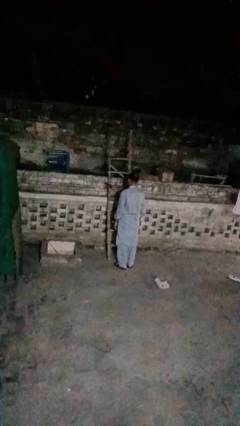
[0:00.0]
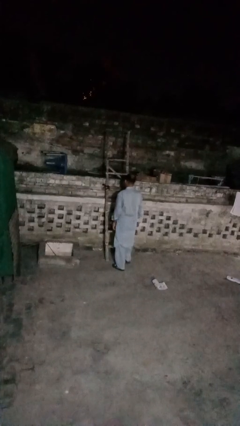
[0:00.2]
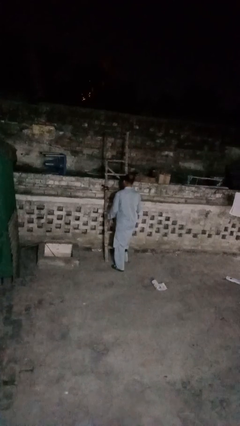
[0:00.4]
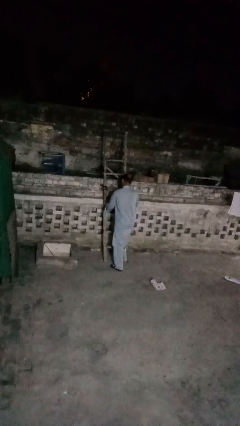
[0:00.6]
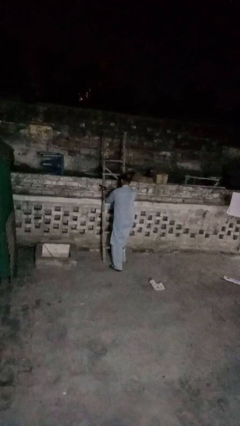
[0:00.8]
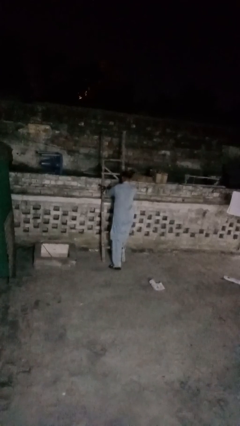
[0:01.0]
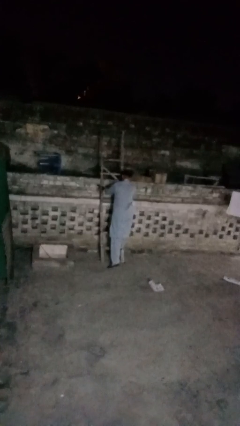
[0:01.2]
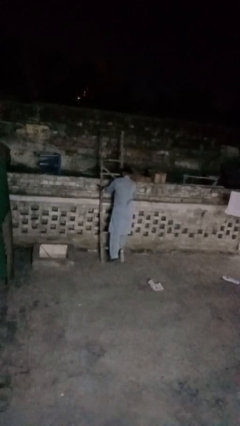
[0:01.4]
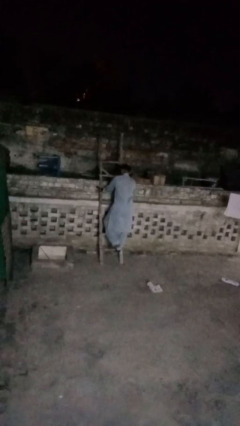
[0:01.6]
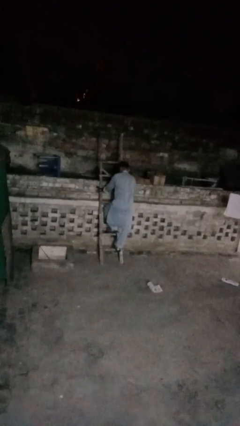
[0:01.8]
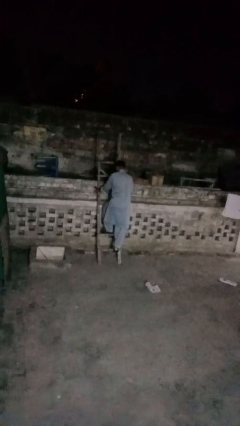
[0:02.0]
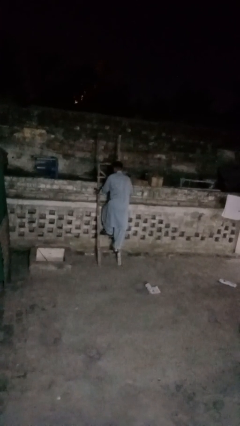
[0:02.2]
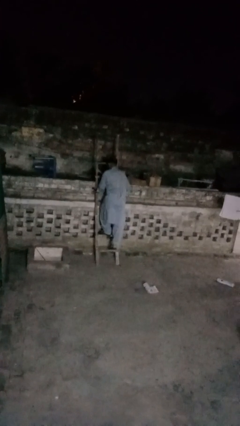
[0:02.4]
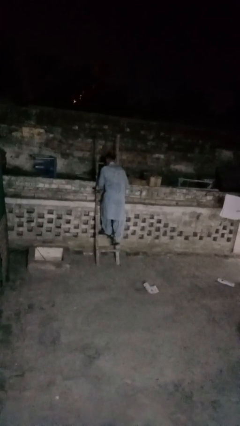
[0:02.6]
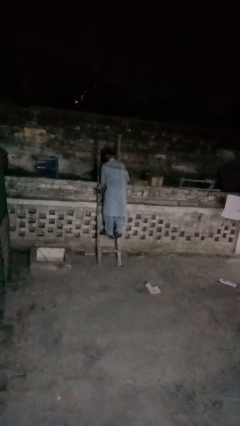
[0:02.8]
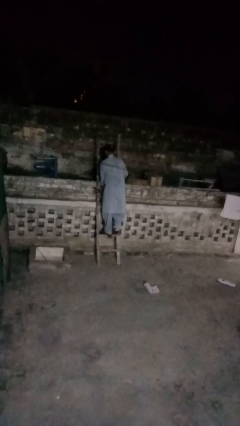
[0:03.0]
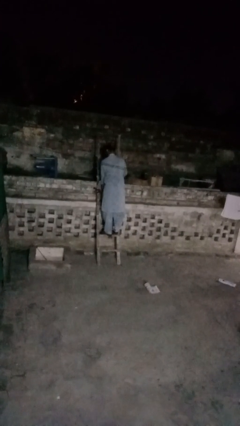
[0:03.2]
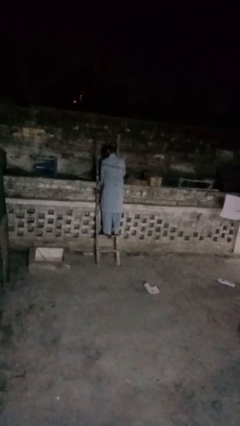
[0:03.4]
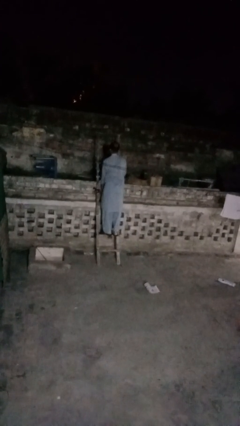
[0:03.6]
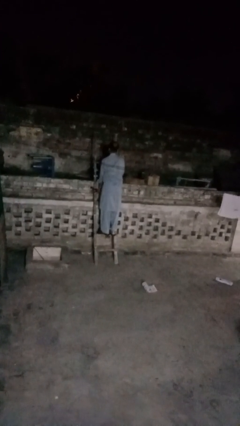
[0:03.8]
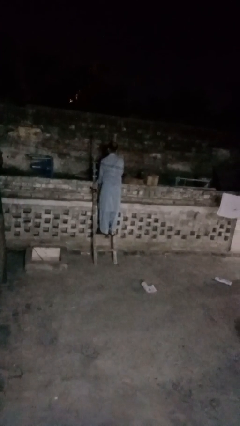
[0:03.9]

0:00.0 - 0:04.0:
person climbs up ladder

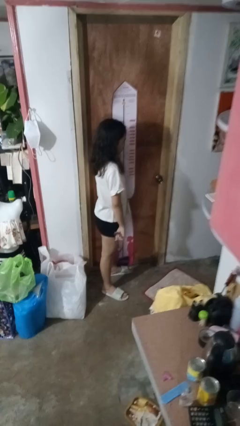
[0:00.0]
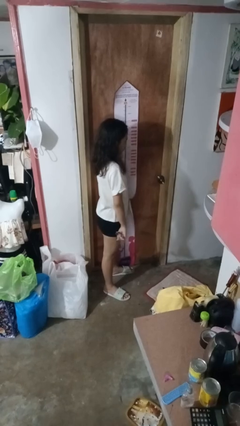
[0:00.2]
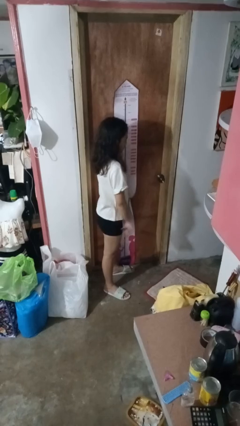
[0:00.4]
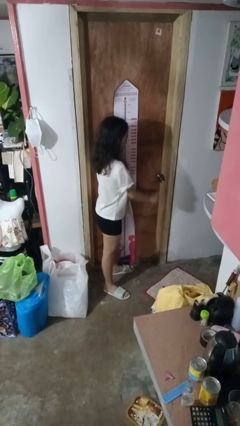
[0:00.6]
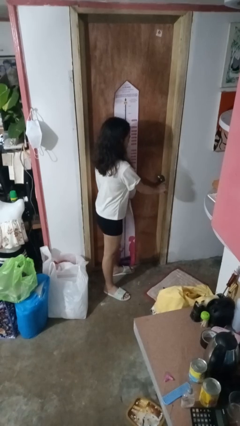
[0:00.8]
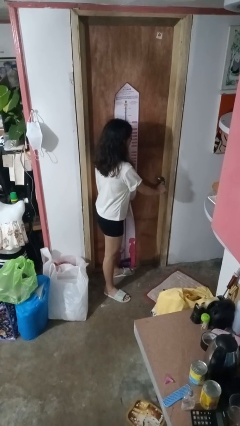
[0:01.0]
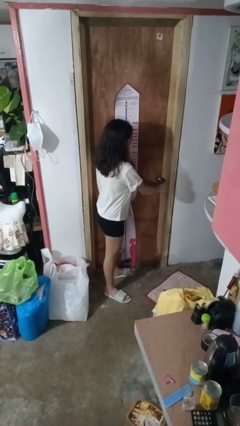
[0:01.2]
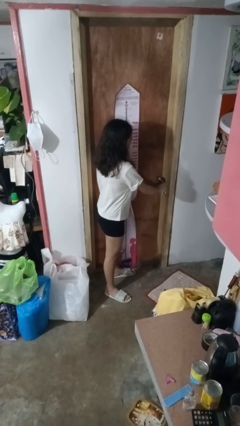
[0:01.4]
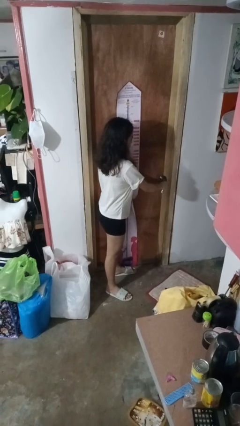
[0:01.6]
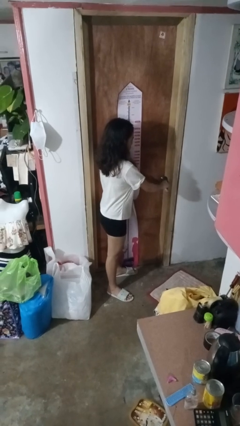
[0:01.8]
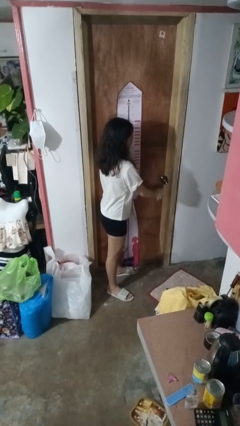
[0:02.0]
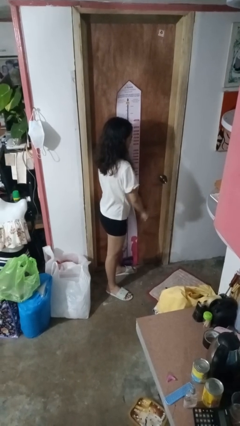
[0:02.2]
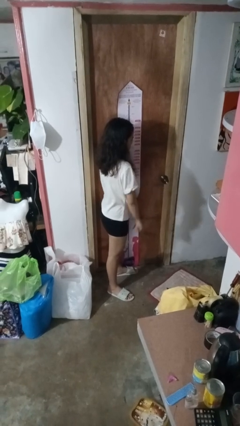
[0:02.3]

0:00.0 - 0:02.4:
person unlocks door with keys

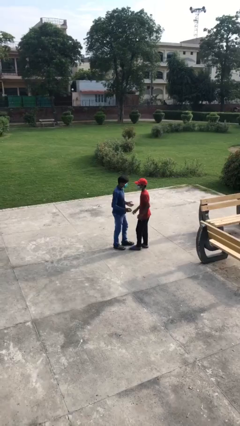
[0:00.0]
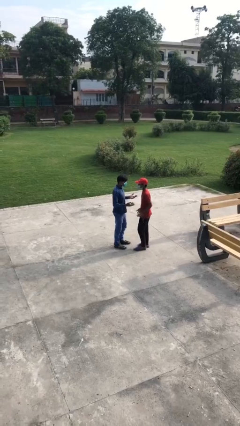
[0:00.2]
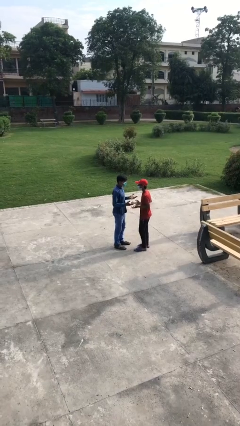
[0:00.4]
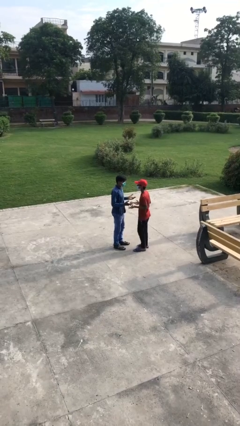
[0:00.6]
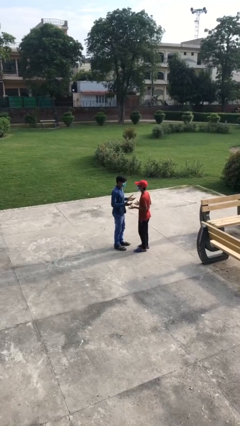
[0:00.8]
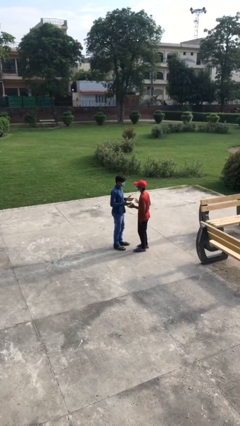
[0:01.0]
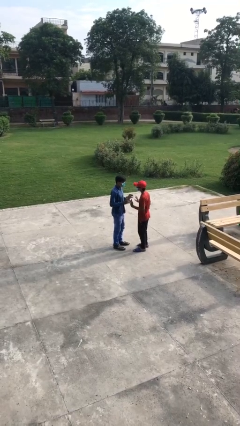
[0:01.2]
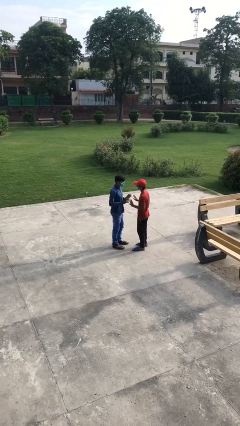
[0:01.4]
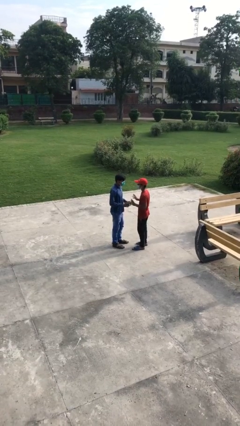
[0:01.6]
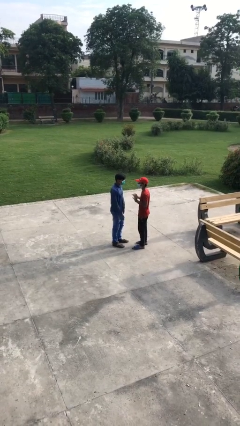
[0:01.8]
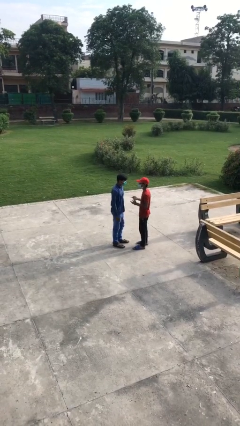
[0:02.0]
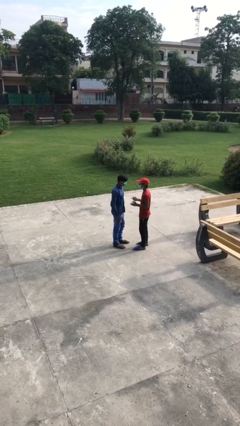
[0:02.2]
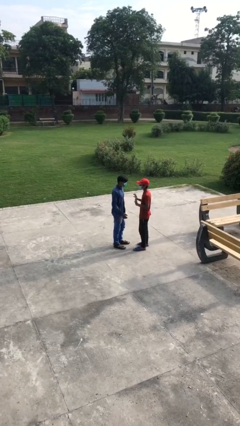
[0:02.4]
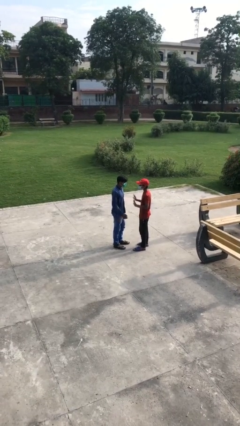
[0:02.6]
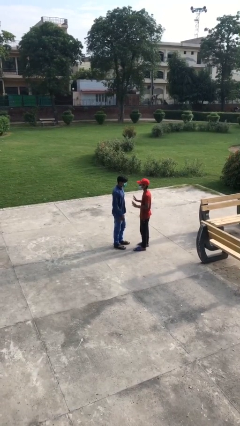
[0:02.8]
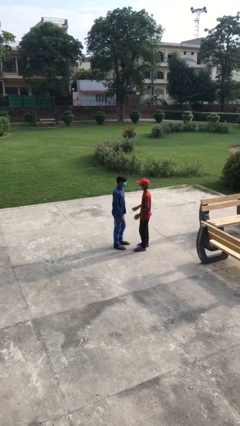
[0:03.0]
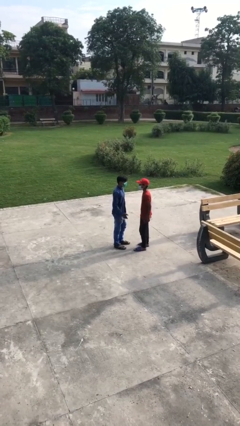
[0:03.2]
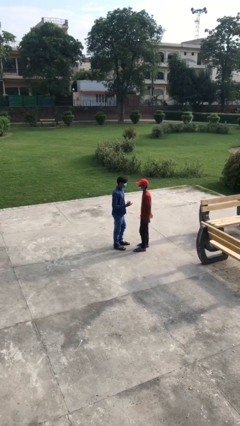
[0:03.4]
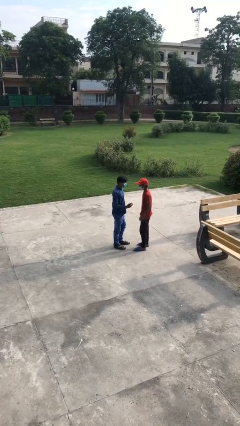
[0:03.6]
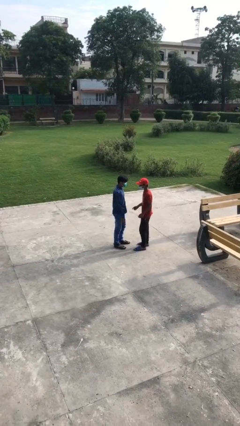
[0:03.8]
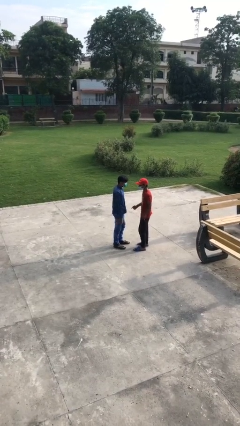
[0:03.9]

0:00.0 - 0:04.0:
person talks to person

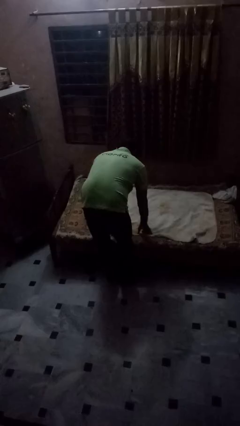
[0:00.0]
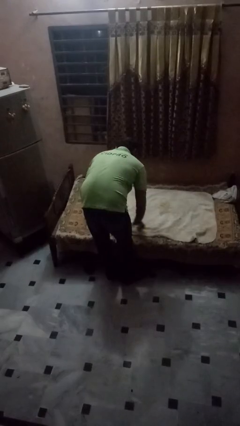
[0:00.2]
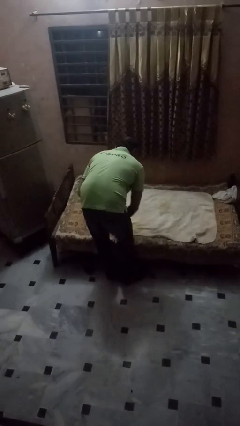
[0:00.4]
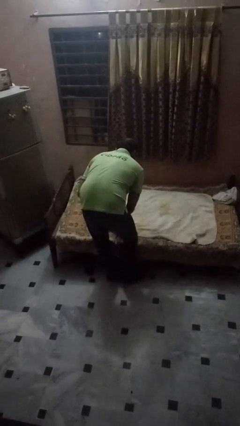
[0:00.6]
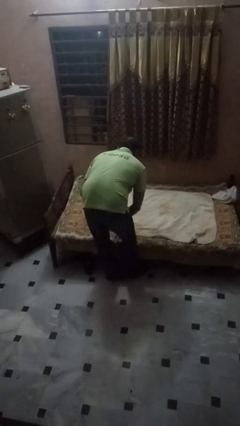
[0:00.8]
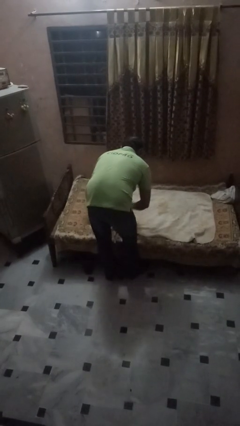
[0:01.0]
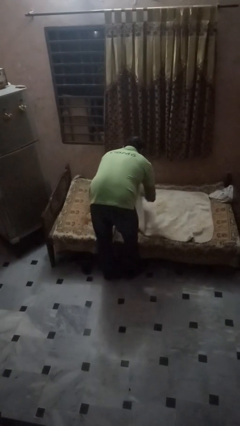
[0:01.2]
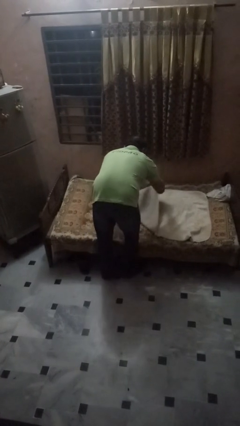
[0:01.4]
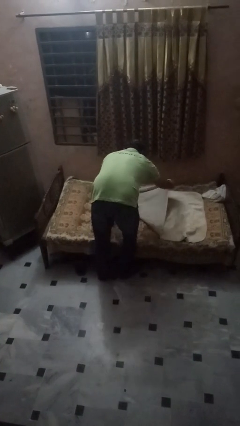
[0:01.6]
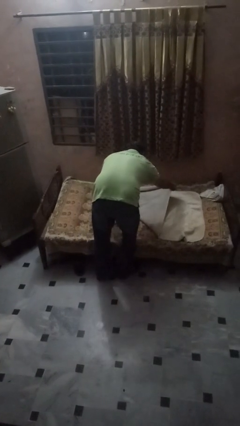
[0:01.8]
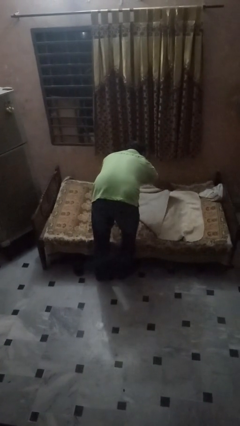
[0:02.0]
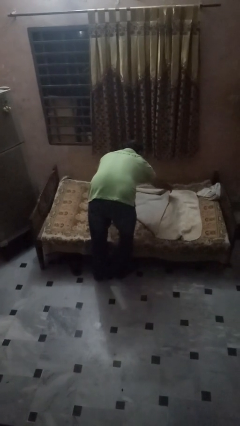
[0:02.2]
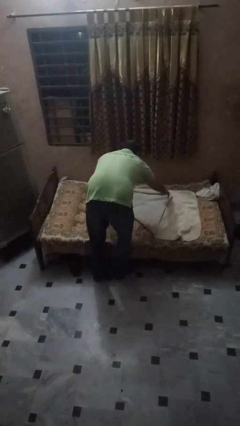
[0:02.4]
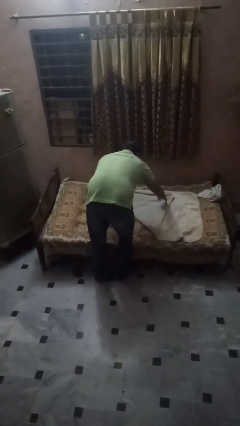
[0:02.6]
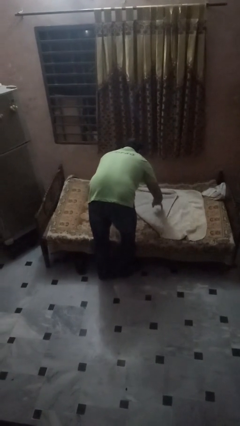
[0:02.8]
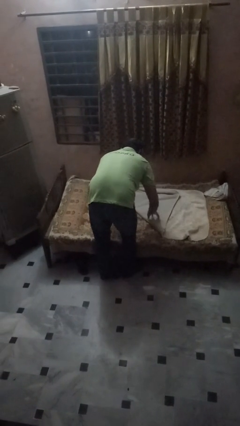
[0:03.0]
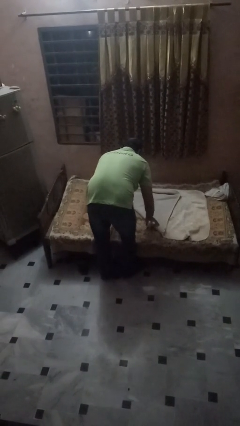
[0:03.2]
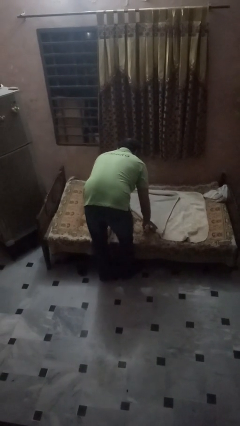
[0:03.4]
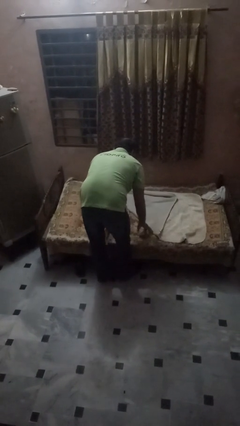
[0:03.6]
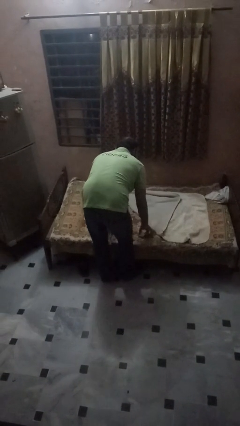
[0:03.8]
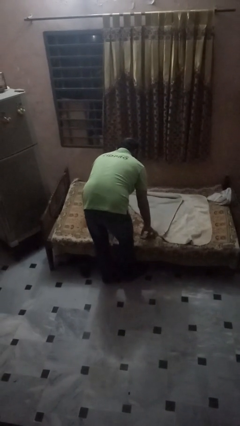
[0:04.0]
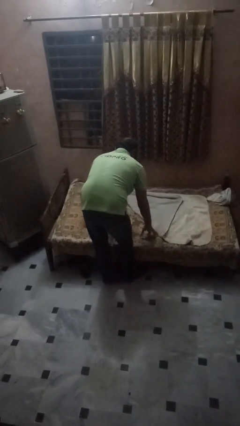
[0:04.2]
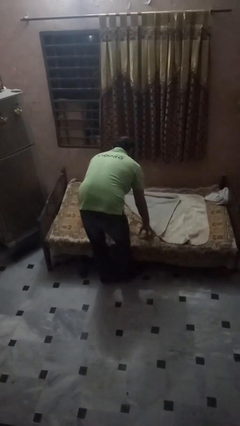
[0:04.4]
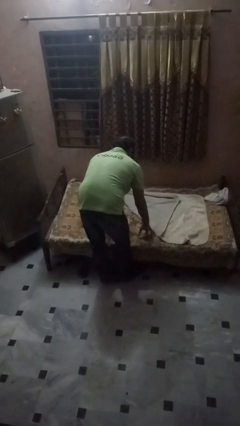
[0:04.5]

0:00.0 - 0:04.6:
person folds blanket

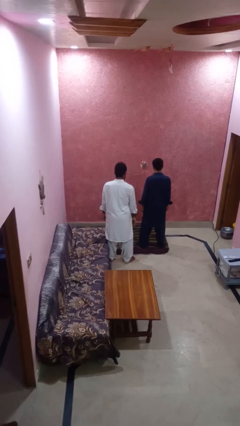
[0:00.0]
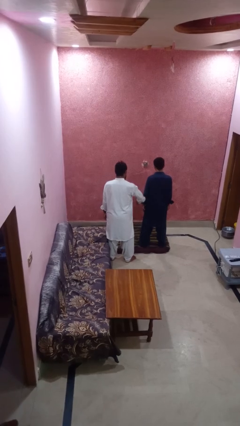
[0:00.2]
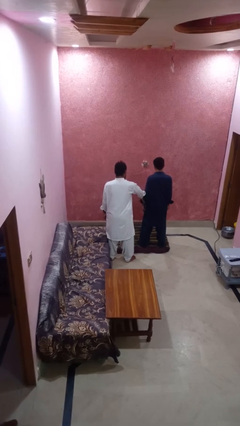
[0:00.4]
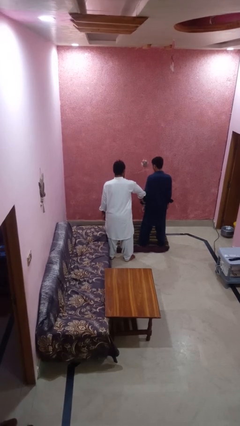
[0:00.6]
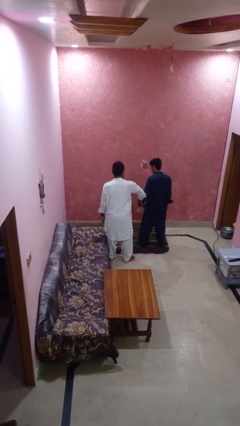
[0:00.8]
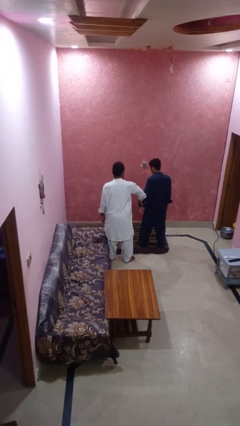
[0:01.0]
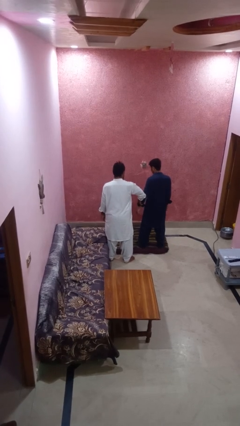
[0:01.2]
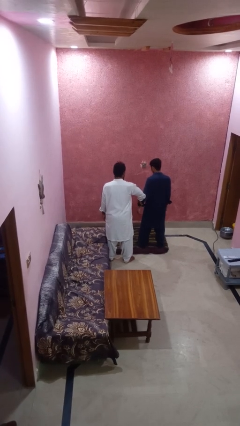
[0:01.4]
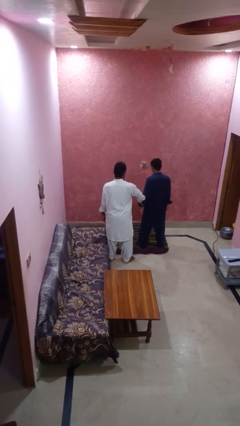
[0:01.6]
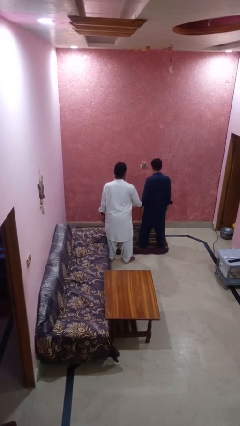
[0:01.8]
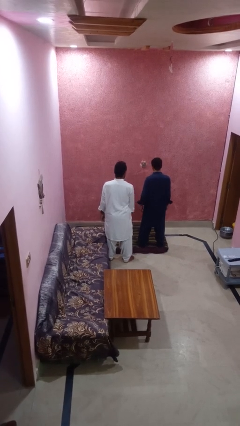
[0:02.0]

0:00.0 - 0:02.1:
person grabs person by bicep

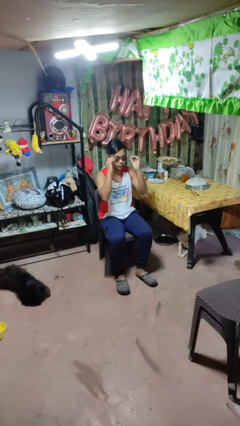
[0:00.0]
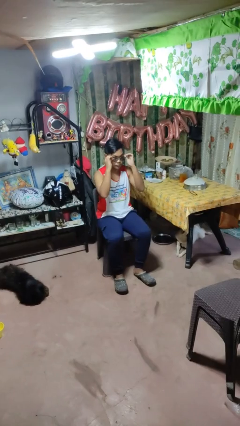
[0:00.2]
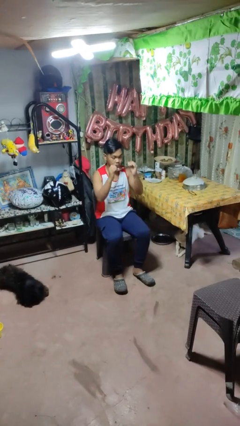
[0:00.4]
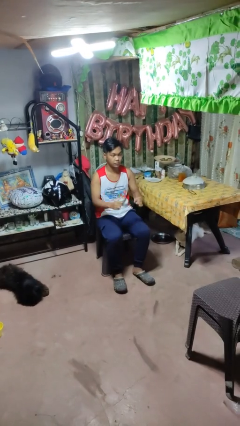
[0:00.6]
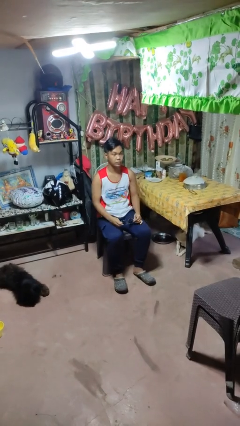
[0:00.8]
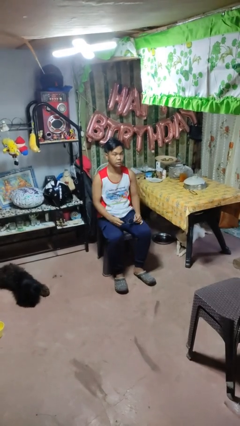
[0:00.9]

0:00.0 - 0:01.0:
person takes off sunglasses
